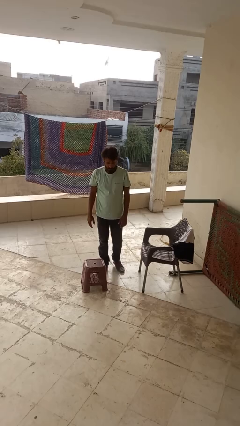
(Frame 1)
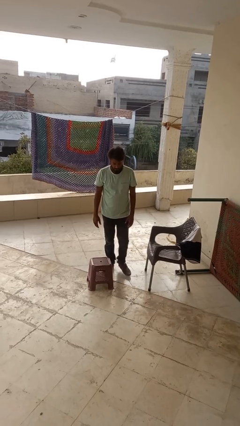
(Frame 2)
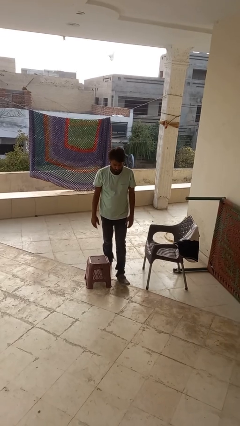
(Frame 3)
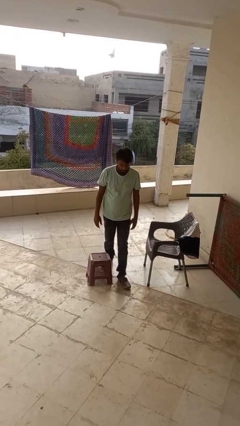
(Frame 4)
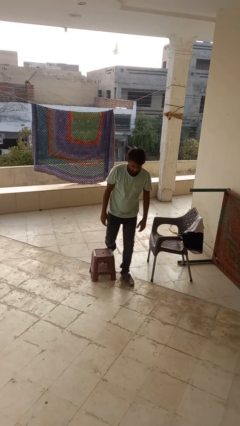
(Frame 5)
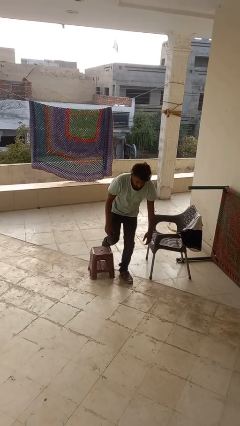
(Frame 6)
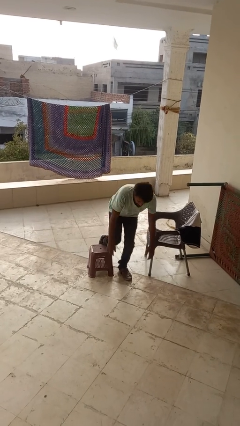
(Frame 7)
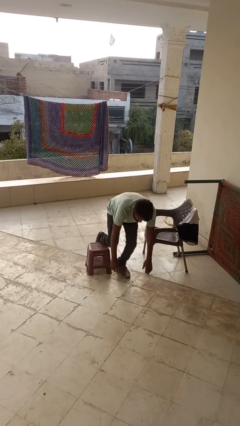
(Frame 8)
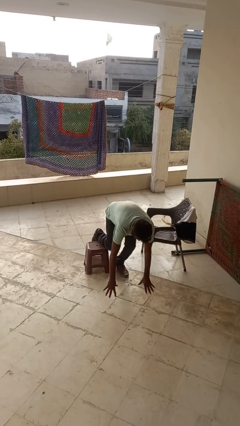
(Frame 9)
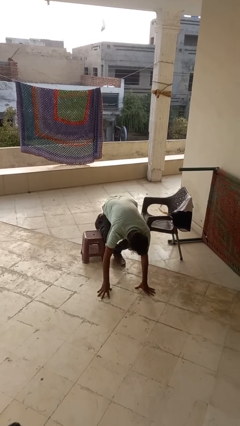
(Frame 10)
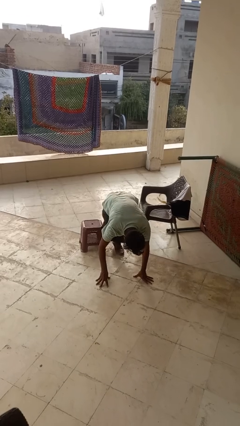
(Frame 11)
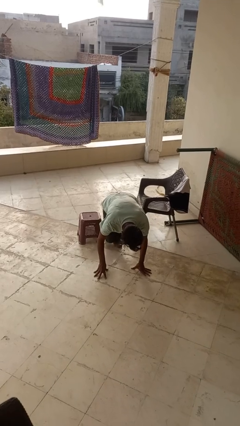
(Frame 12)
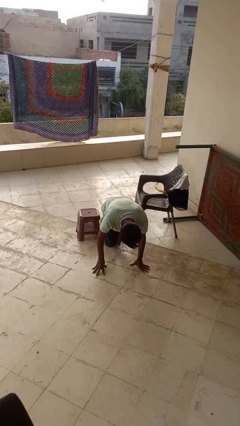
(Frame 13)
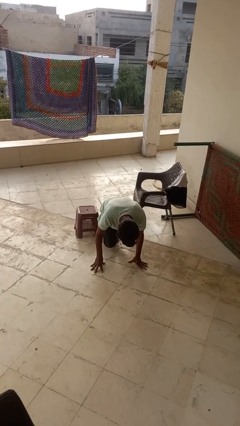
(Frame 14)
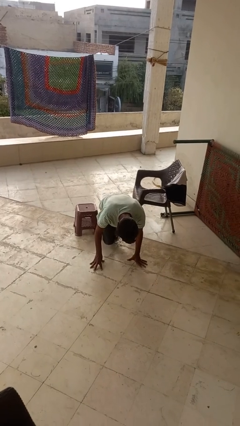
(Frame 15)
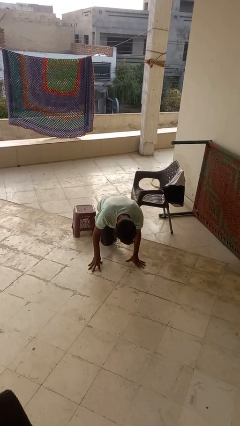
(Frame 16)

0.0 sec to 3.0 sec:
person trips on object on floor

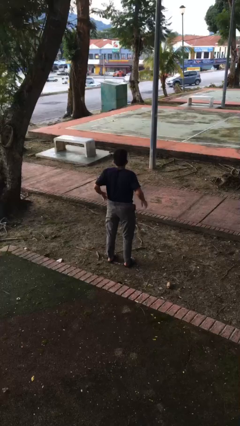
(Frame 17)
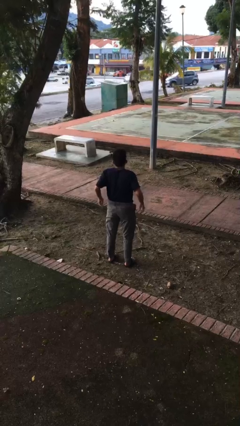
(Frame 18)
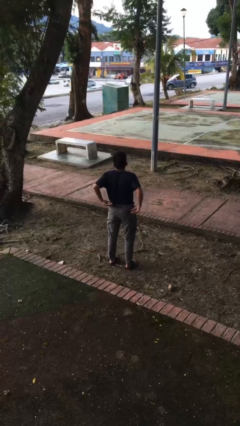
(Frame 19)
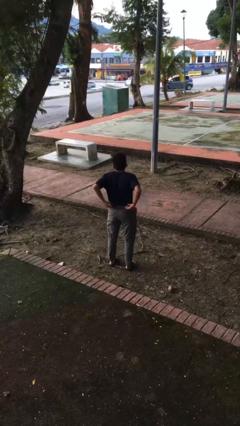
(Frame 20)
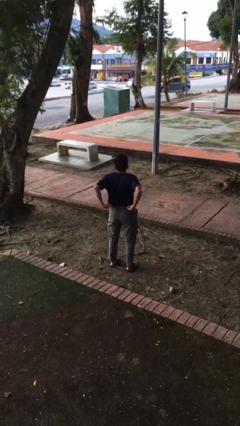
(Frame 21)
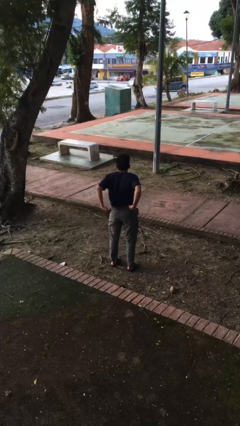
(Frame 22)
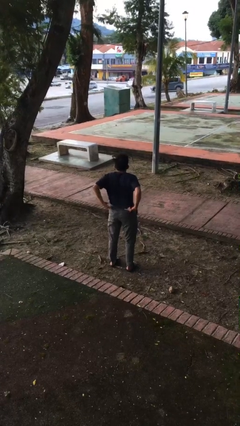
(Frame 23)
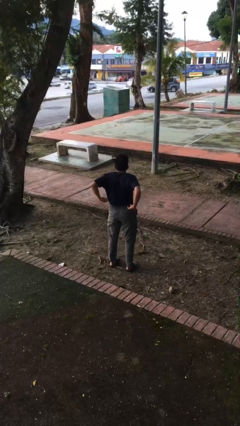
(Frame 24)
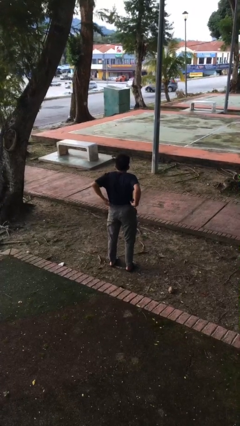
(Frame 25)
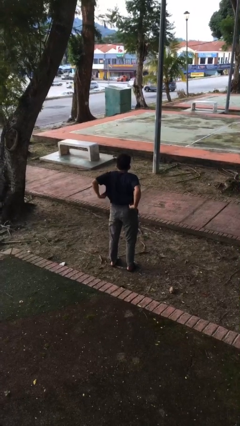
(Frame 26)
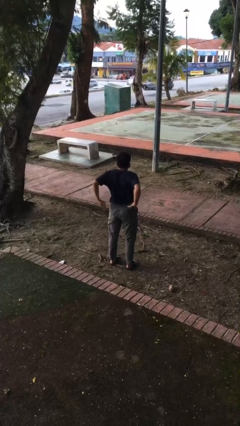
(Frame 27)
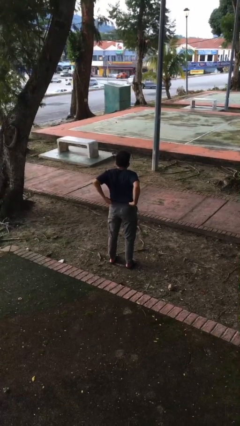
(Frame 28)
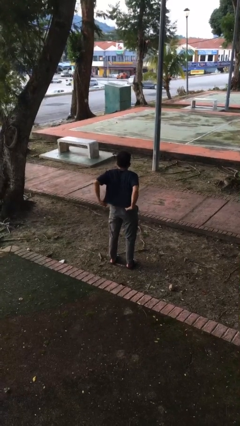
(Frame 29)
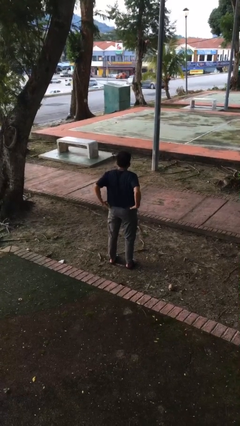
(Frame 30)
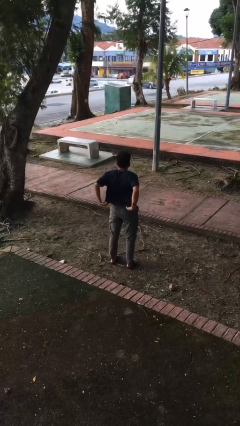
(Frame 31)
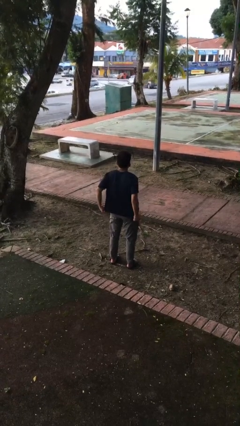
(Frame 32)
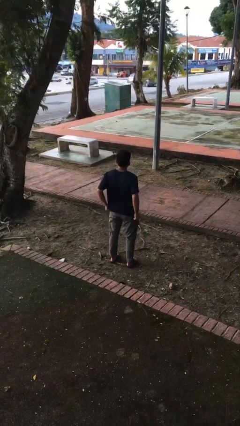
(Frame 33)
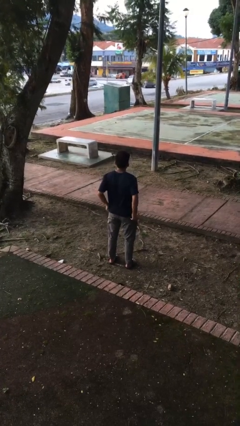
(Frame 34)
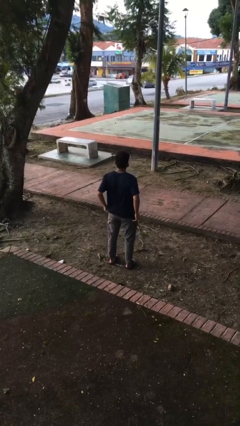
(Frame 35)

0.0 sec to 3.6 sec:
person untucks shirt

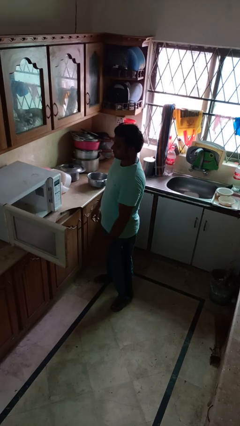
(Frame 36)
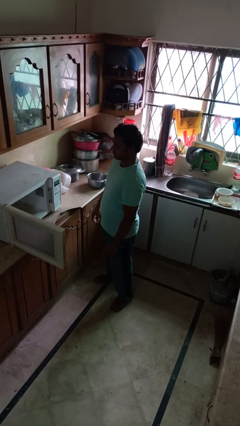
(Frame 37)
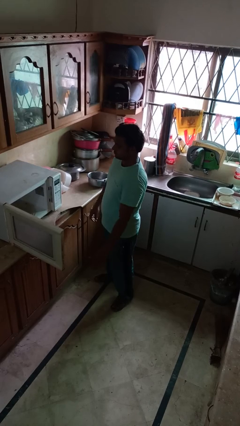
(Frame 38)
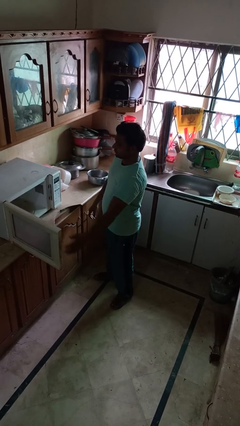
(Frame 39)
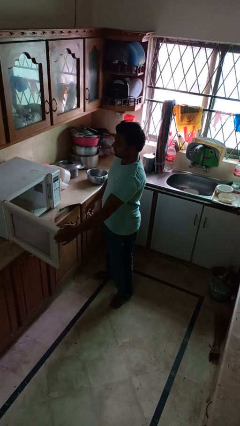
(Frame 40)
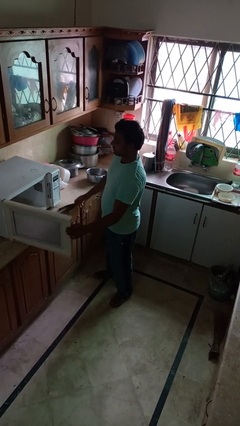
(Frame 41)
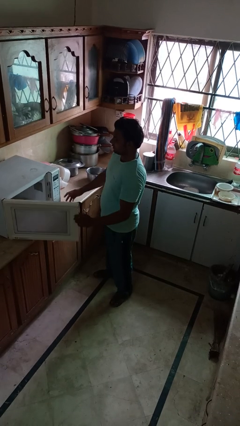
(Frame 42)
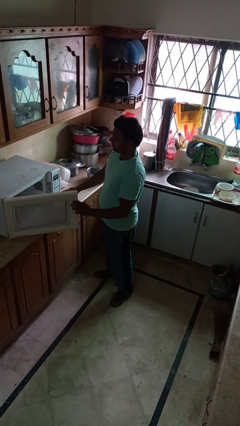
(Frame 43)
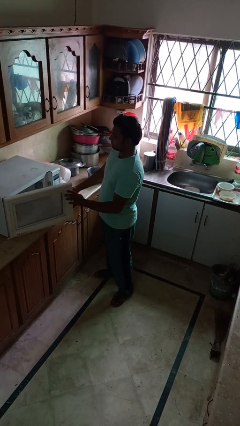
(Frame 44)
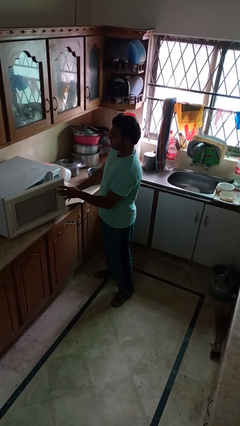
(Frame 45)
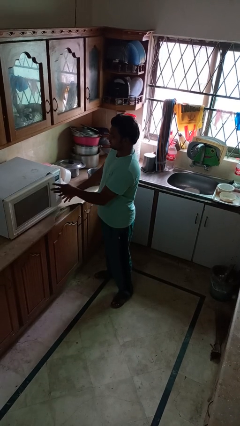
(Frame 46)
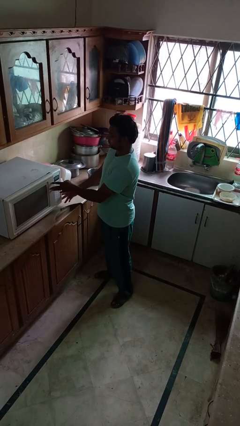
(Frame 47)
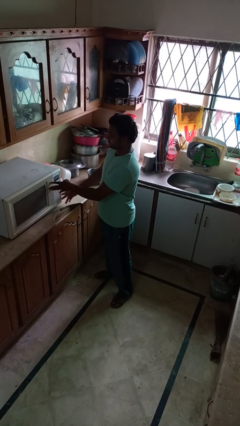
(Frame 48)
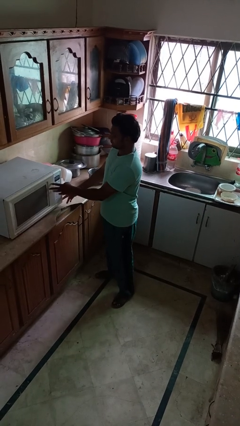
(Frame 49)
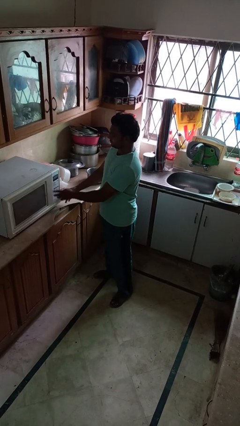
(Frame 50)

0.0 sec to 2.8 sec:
person closes microwave

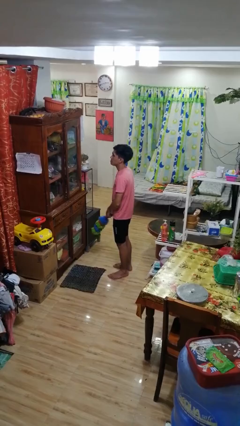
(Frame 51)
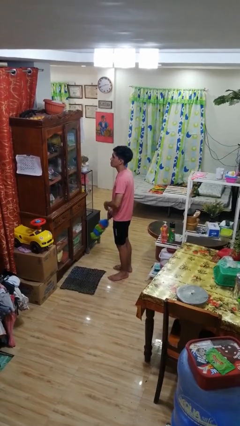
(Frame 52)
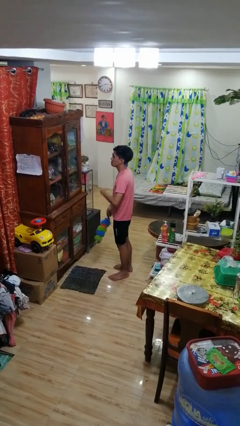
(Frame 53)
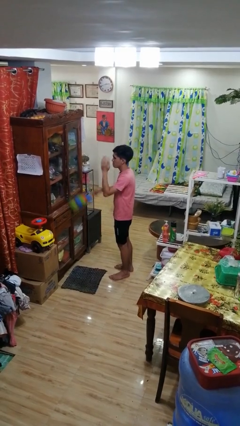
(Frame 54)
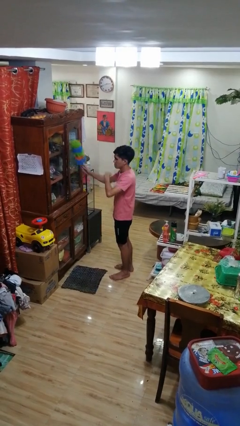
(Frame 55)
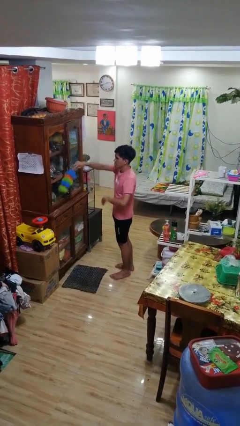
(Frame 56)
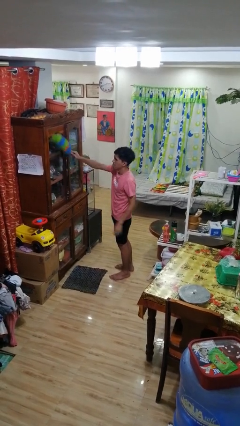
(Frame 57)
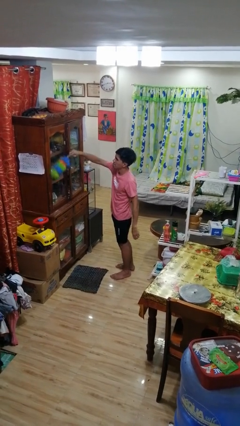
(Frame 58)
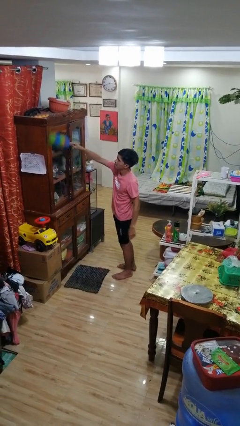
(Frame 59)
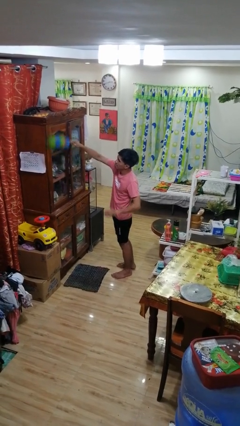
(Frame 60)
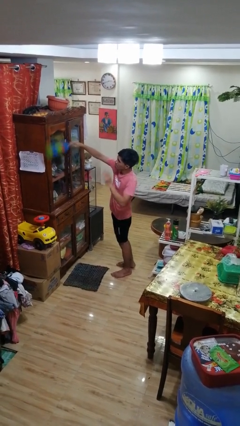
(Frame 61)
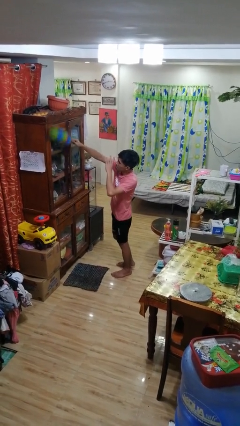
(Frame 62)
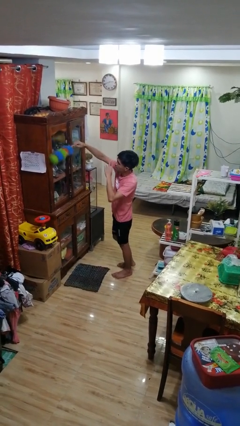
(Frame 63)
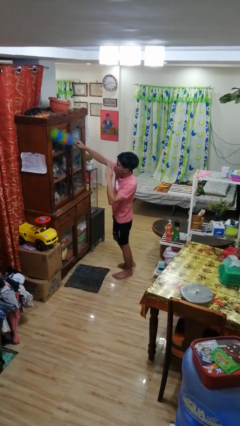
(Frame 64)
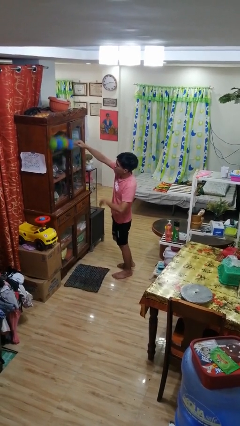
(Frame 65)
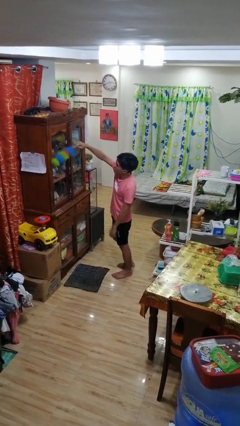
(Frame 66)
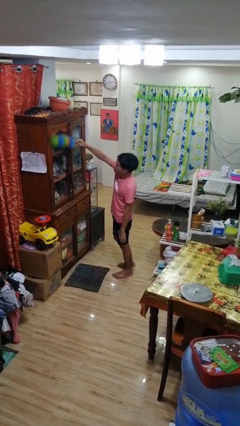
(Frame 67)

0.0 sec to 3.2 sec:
person dusts furniture

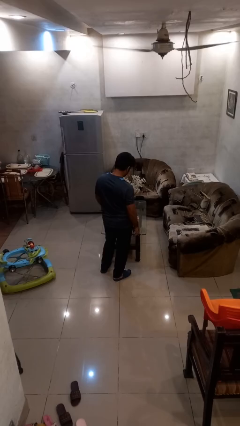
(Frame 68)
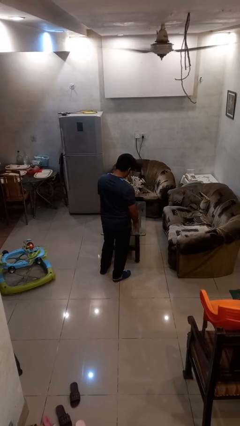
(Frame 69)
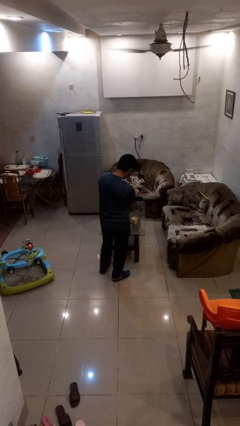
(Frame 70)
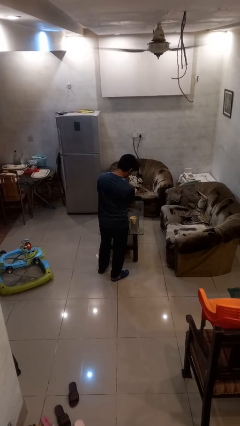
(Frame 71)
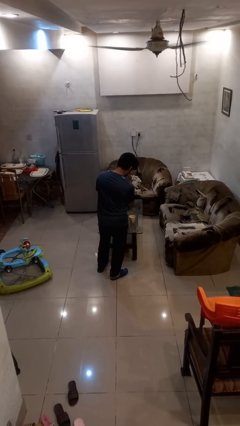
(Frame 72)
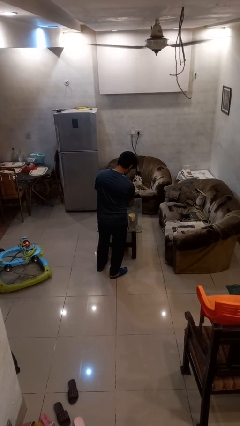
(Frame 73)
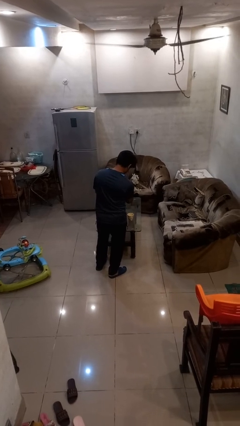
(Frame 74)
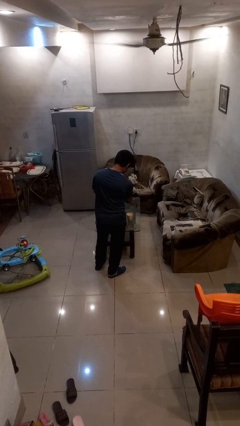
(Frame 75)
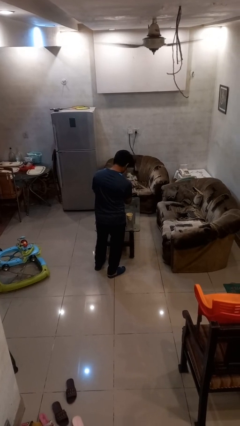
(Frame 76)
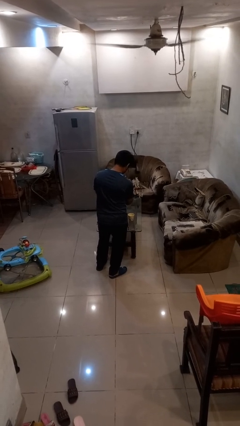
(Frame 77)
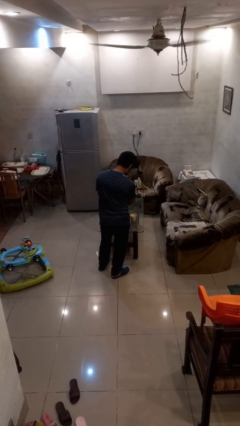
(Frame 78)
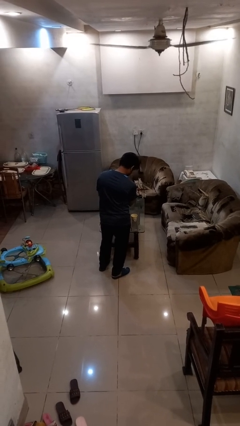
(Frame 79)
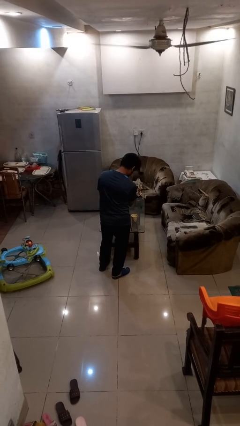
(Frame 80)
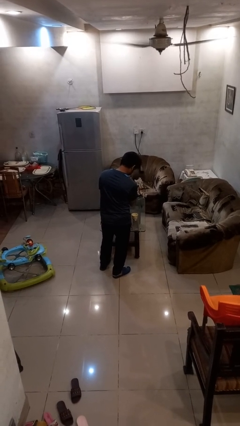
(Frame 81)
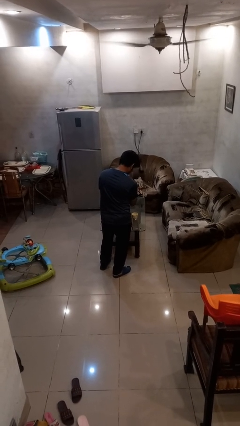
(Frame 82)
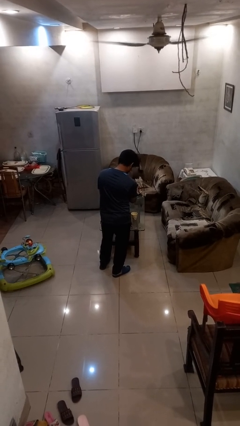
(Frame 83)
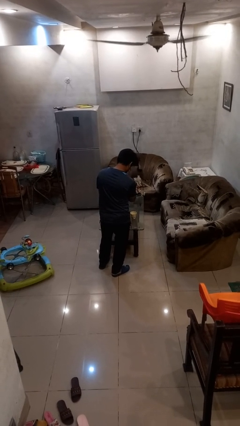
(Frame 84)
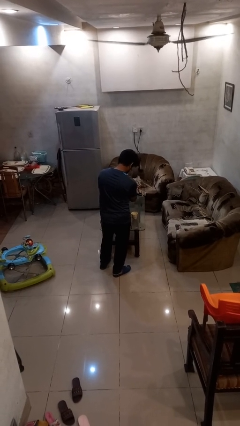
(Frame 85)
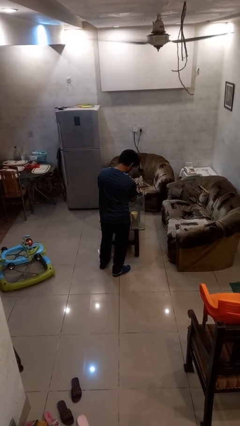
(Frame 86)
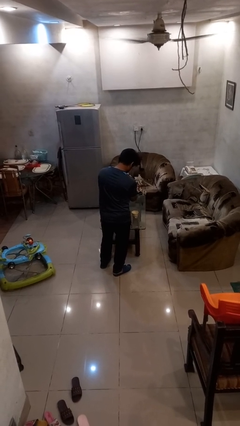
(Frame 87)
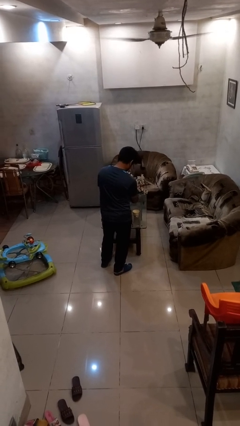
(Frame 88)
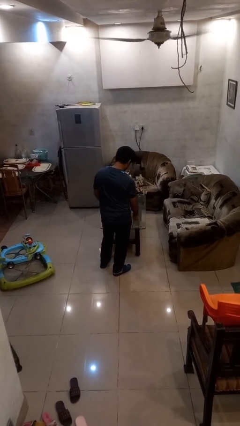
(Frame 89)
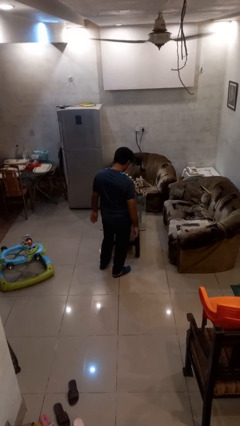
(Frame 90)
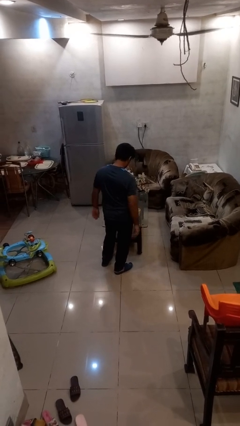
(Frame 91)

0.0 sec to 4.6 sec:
person arranges flowers in vase
